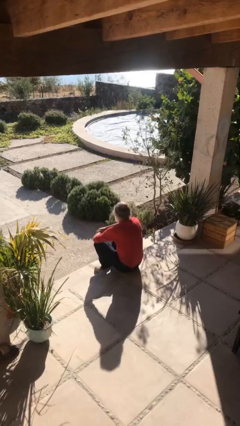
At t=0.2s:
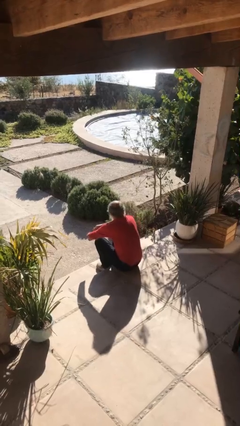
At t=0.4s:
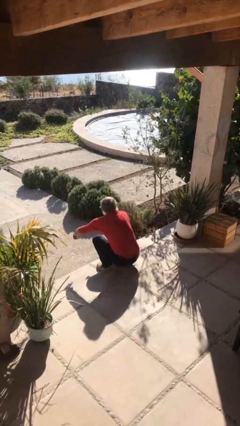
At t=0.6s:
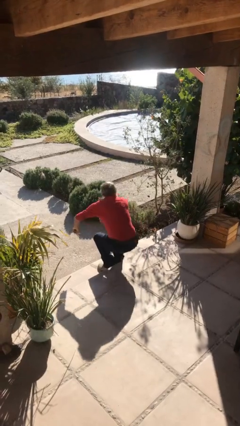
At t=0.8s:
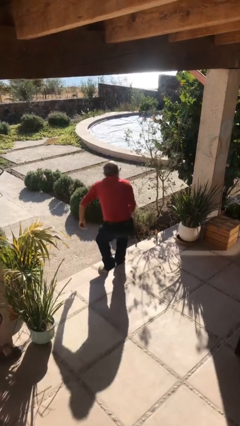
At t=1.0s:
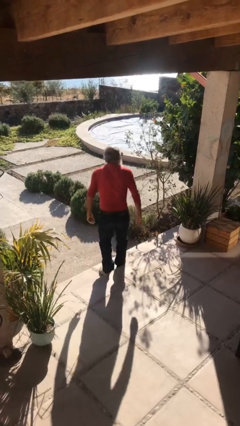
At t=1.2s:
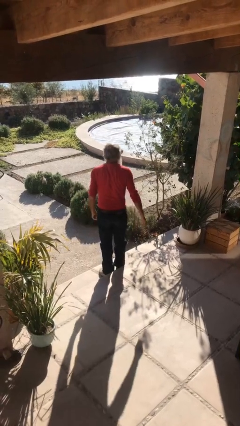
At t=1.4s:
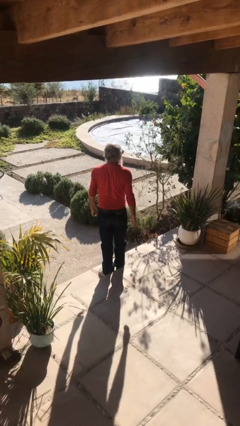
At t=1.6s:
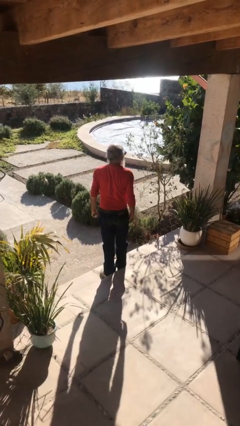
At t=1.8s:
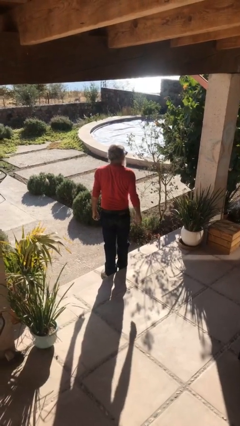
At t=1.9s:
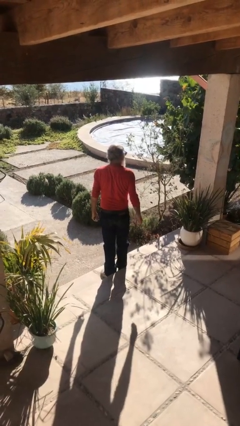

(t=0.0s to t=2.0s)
person stands up

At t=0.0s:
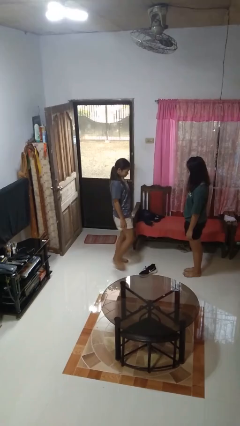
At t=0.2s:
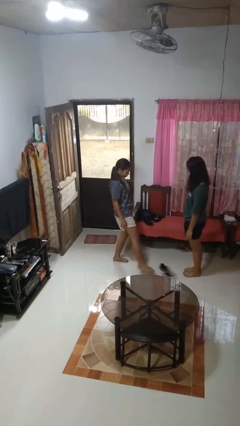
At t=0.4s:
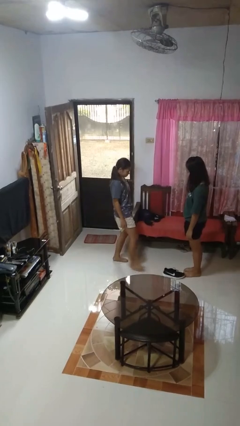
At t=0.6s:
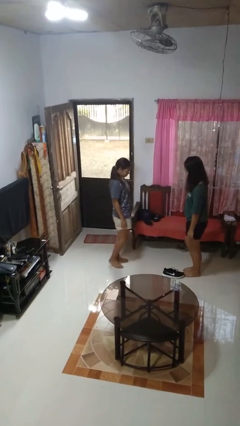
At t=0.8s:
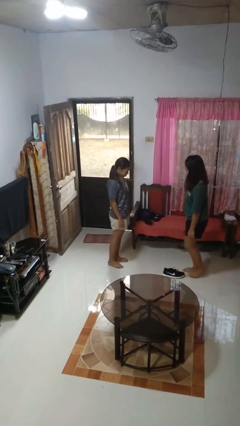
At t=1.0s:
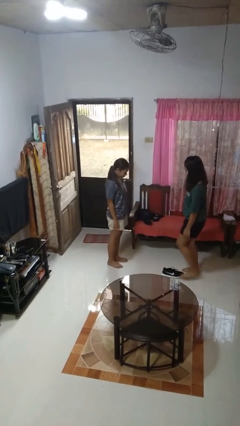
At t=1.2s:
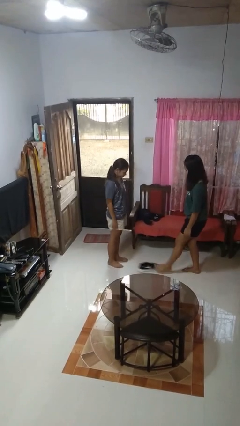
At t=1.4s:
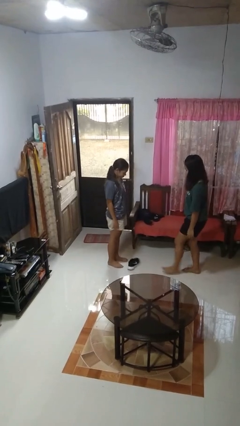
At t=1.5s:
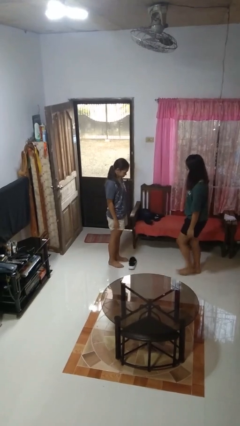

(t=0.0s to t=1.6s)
person kicks object to person

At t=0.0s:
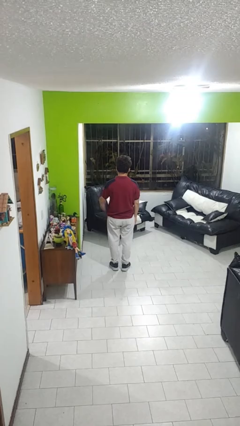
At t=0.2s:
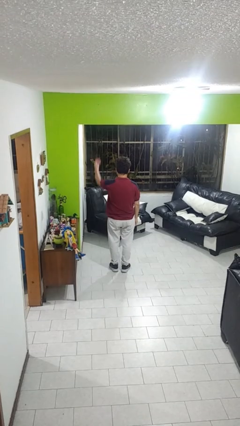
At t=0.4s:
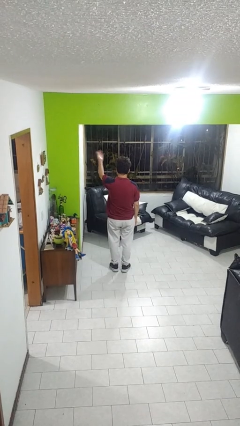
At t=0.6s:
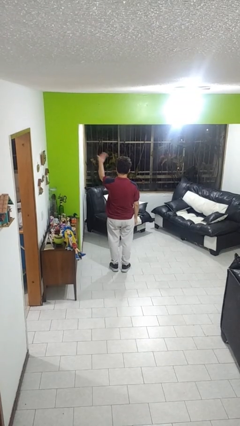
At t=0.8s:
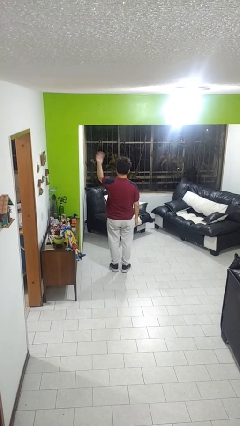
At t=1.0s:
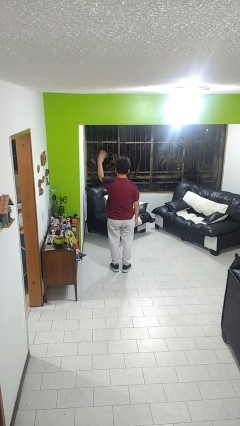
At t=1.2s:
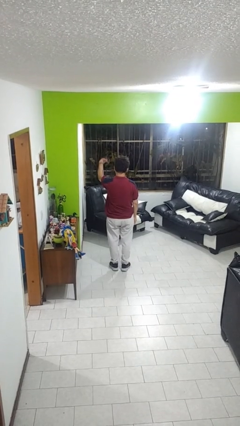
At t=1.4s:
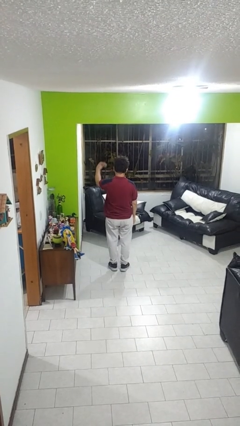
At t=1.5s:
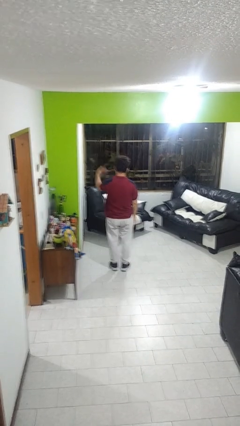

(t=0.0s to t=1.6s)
person gestures come here

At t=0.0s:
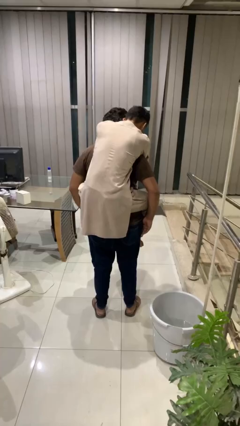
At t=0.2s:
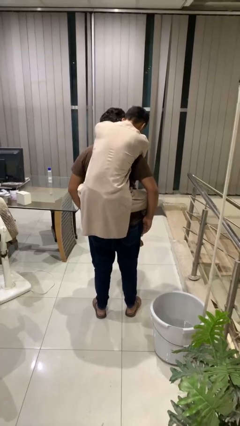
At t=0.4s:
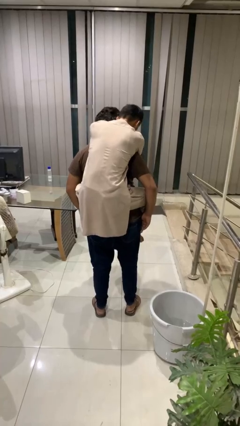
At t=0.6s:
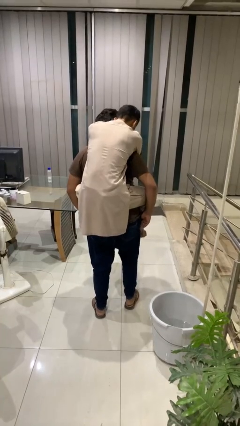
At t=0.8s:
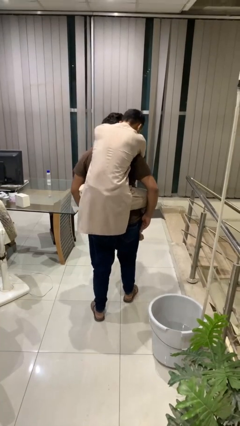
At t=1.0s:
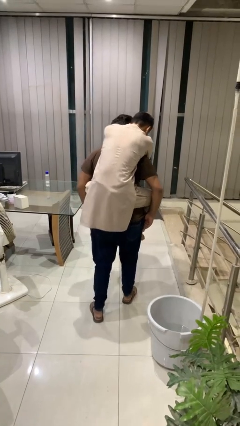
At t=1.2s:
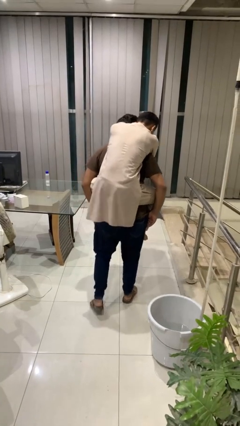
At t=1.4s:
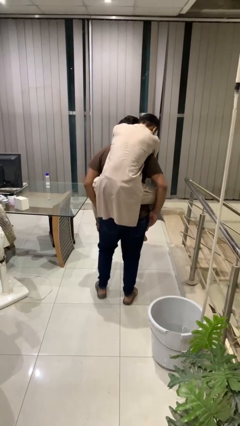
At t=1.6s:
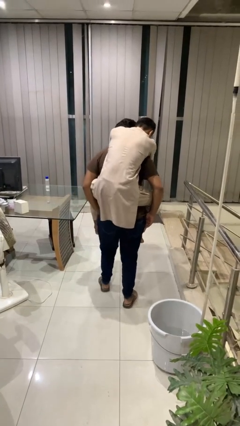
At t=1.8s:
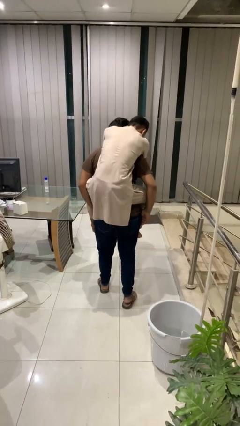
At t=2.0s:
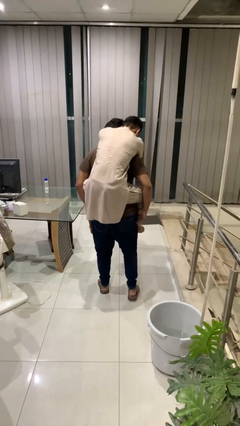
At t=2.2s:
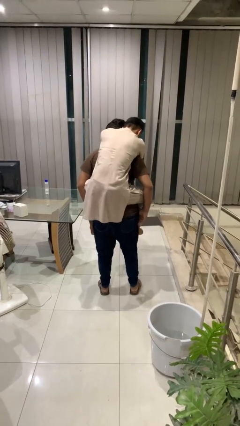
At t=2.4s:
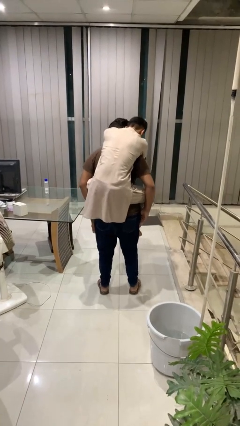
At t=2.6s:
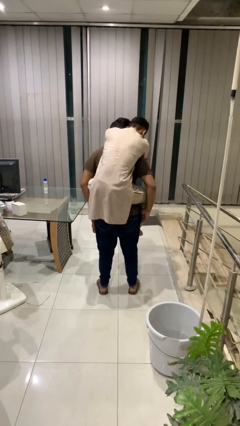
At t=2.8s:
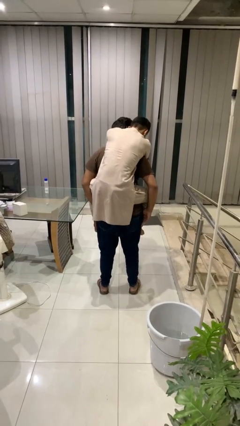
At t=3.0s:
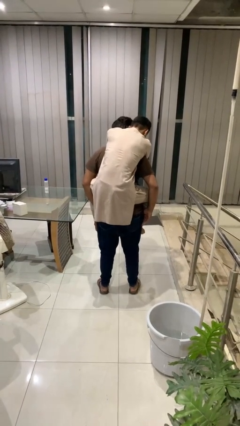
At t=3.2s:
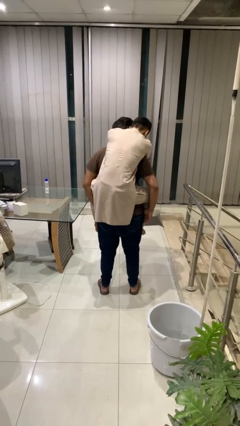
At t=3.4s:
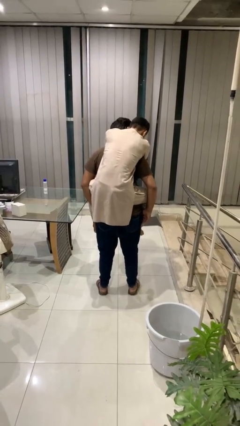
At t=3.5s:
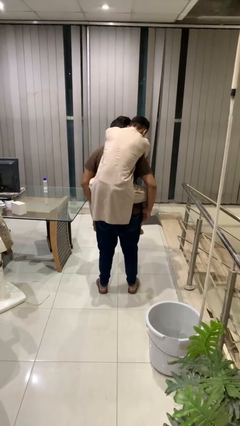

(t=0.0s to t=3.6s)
person carries person on back

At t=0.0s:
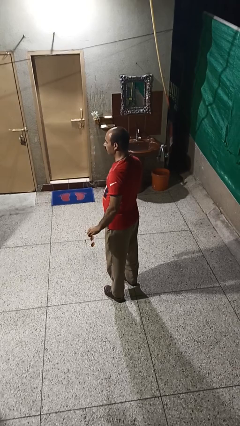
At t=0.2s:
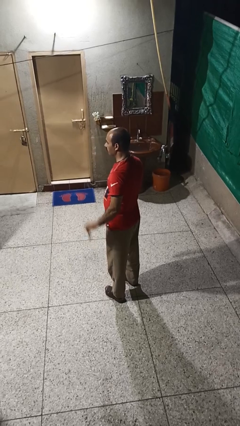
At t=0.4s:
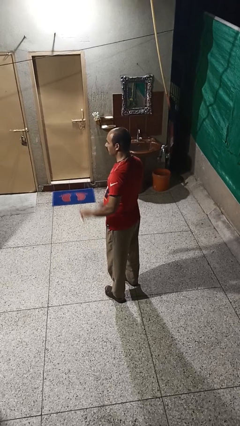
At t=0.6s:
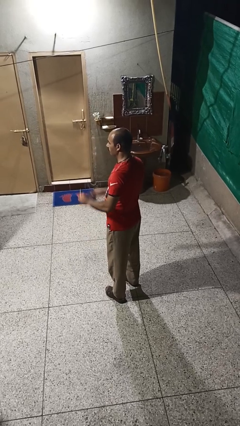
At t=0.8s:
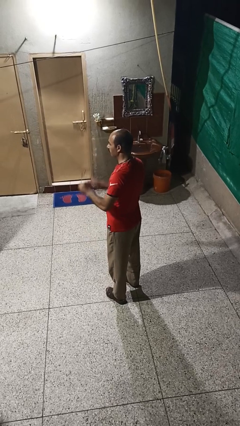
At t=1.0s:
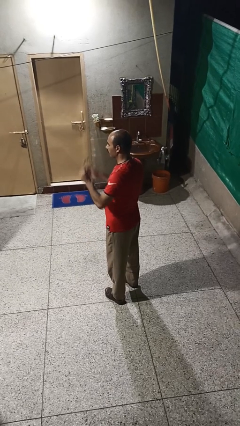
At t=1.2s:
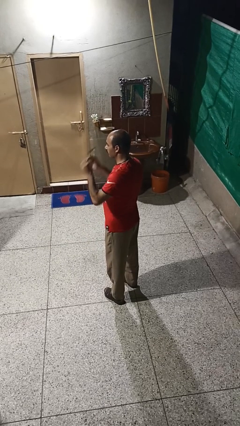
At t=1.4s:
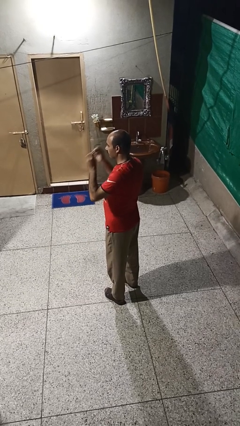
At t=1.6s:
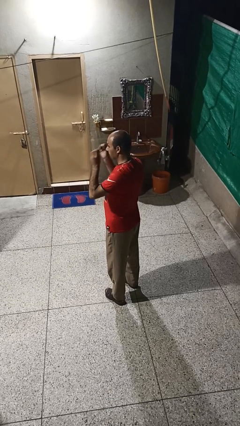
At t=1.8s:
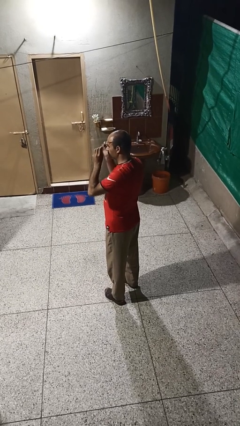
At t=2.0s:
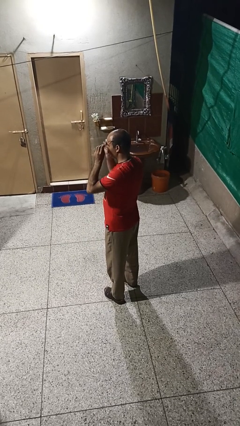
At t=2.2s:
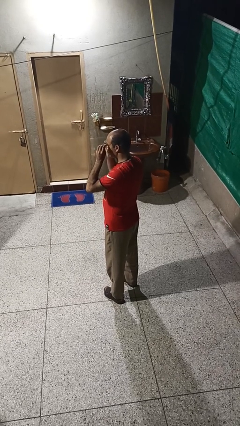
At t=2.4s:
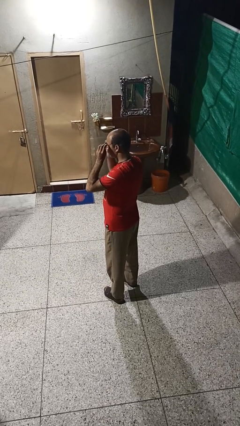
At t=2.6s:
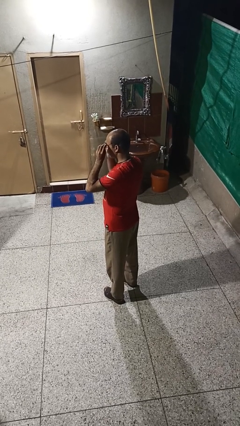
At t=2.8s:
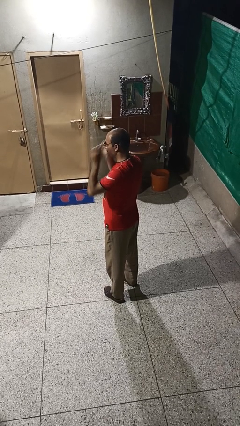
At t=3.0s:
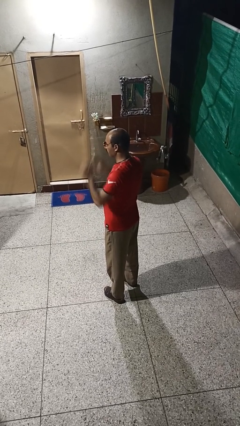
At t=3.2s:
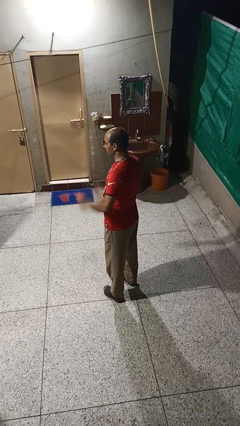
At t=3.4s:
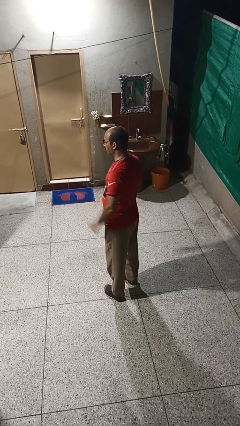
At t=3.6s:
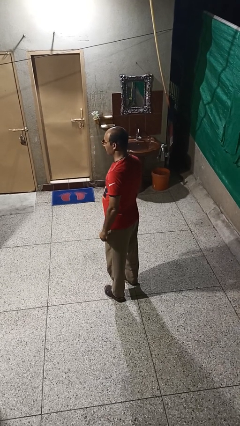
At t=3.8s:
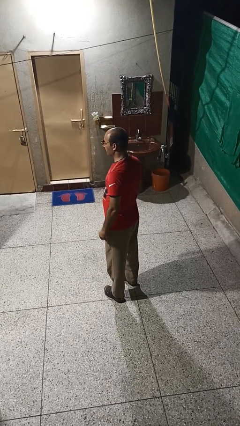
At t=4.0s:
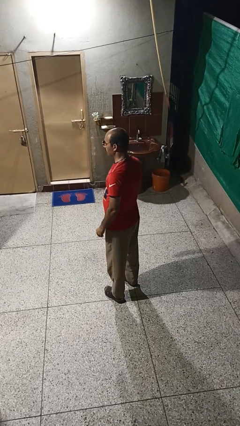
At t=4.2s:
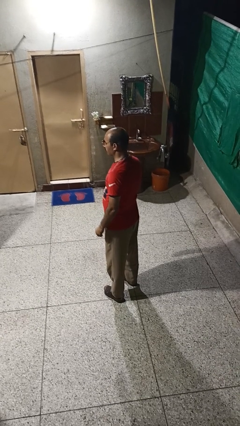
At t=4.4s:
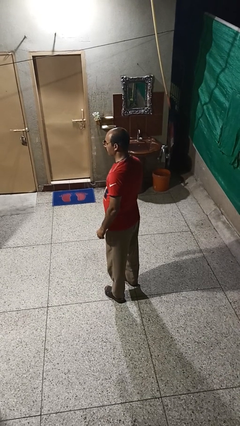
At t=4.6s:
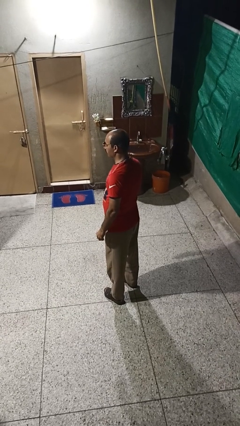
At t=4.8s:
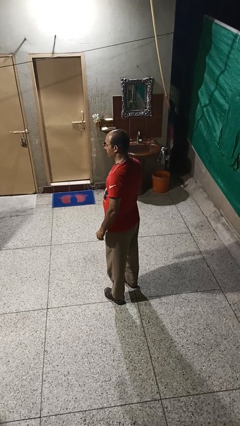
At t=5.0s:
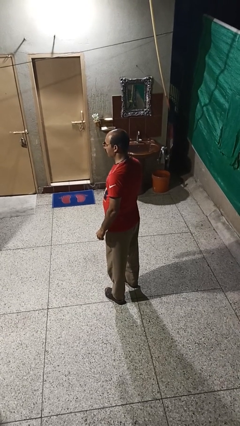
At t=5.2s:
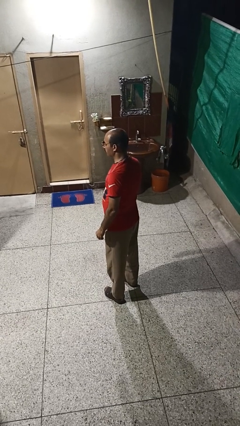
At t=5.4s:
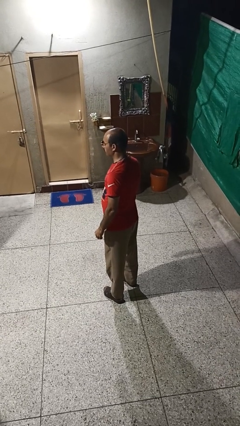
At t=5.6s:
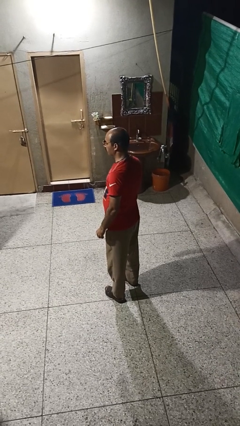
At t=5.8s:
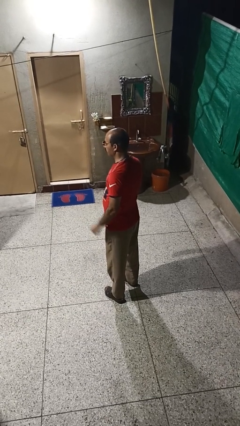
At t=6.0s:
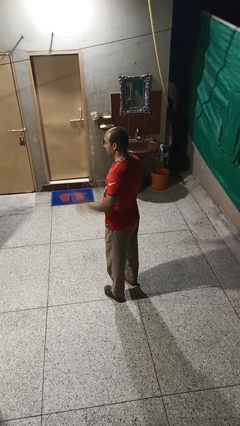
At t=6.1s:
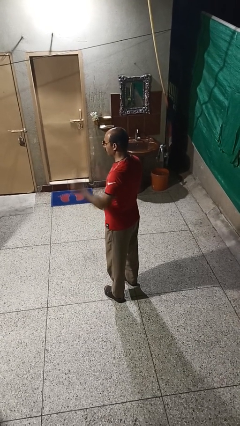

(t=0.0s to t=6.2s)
person puts on sunglasses

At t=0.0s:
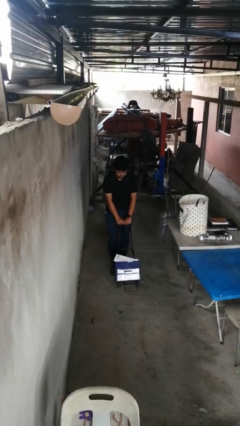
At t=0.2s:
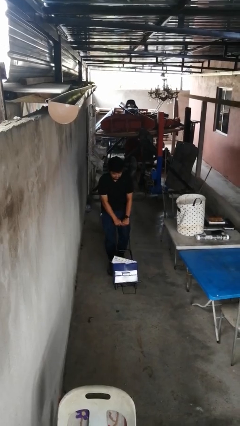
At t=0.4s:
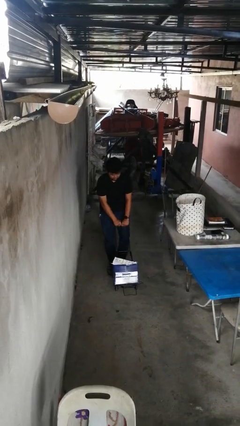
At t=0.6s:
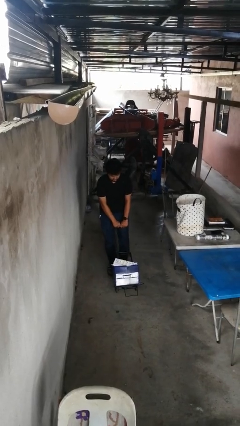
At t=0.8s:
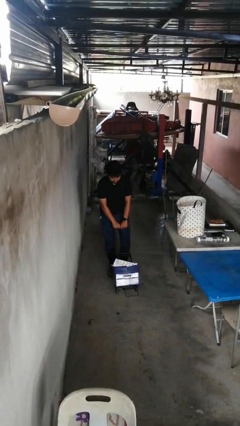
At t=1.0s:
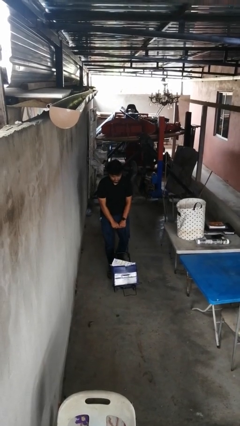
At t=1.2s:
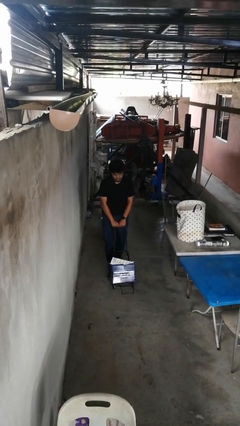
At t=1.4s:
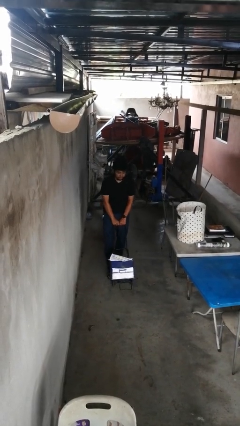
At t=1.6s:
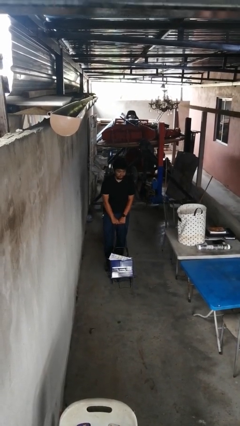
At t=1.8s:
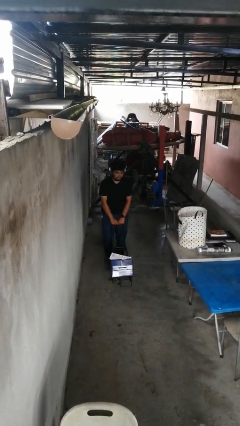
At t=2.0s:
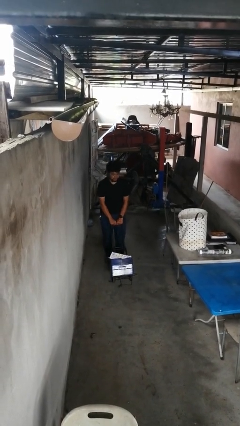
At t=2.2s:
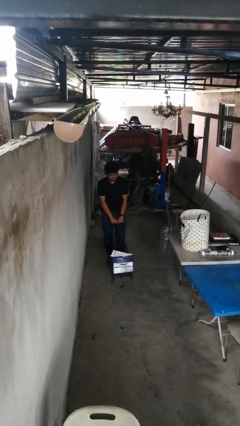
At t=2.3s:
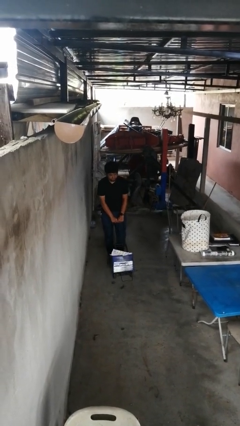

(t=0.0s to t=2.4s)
person pulls wheeled cart
